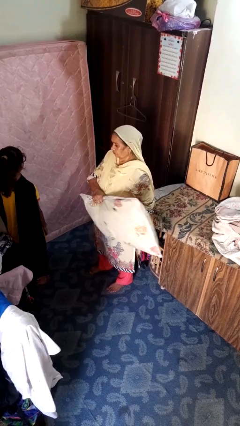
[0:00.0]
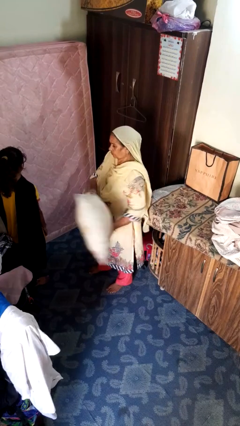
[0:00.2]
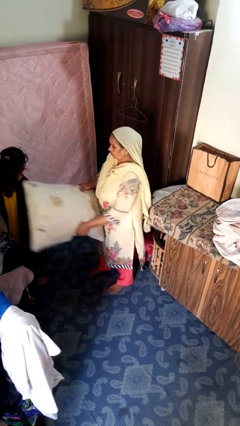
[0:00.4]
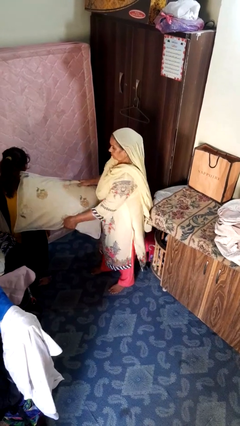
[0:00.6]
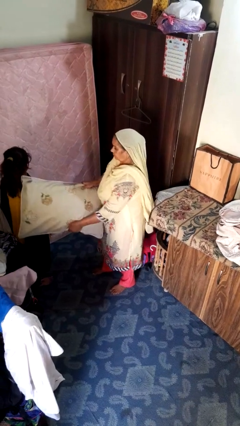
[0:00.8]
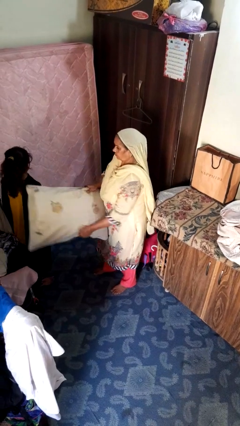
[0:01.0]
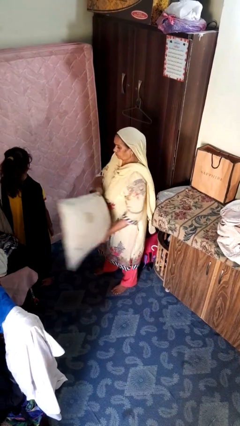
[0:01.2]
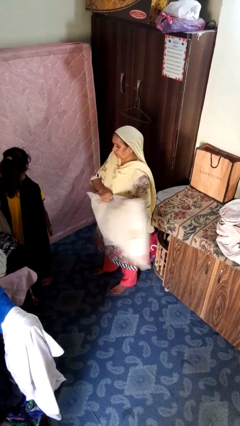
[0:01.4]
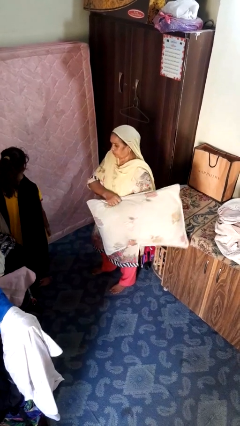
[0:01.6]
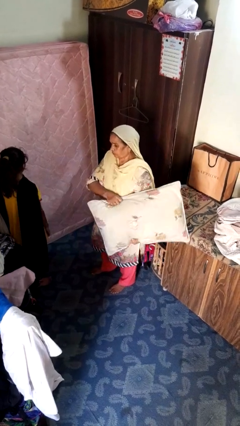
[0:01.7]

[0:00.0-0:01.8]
person hits person with pillow

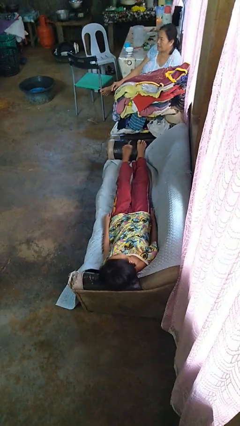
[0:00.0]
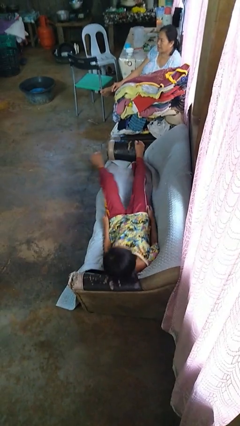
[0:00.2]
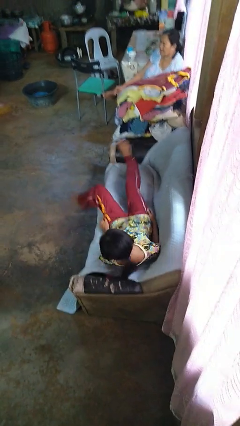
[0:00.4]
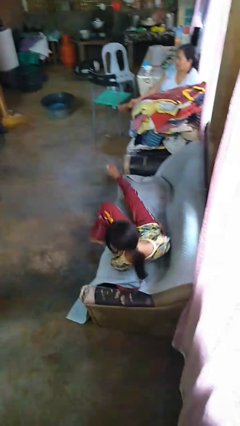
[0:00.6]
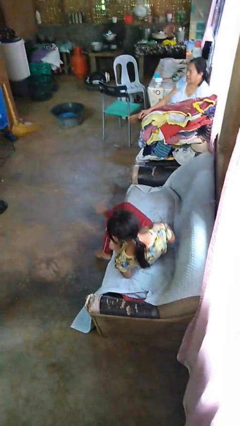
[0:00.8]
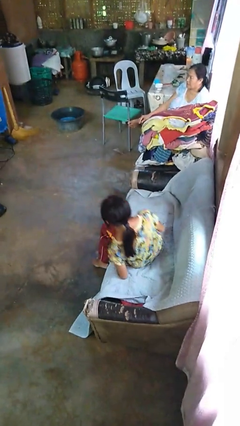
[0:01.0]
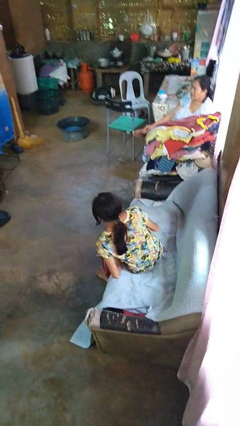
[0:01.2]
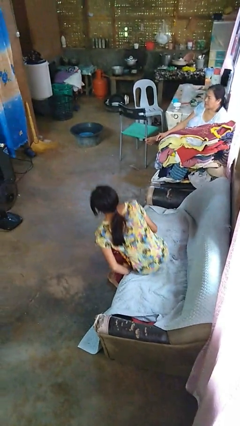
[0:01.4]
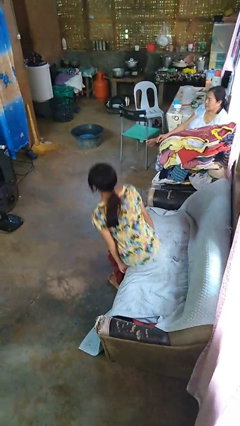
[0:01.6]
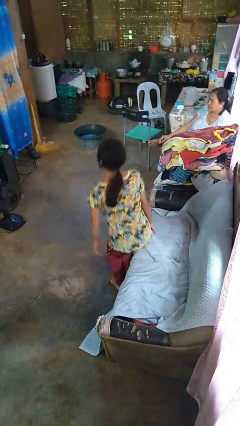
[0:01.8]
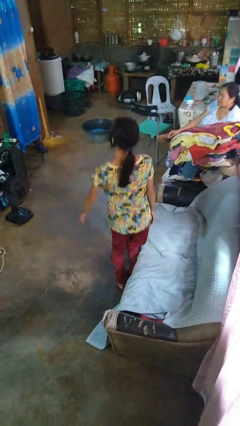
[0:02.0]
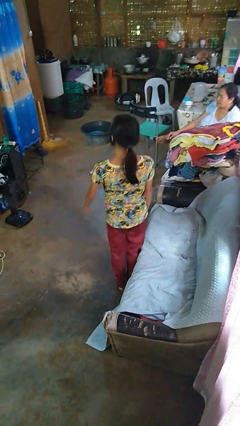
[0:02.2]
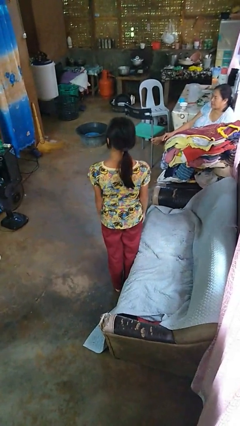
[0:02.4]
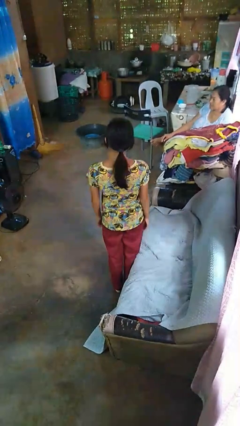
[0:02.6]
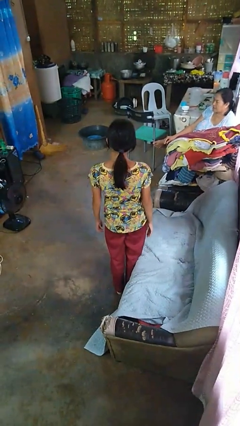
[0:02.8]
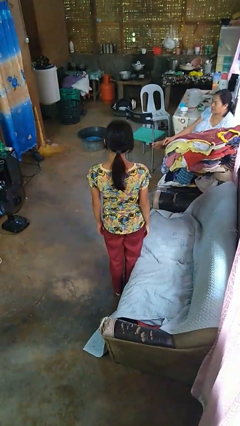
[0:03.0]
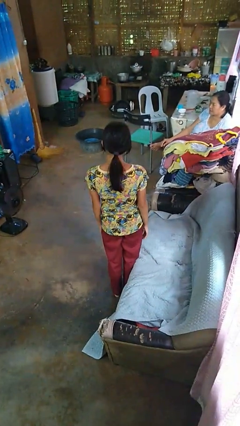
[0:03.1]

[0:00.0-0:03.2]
person stands up

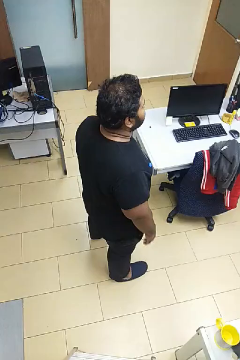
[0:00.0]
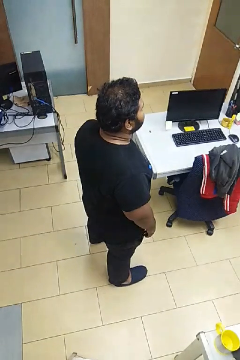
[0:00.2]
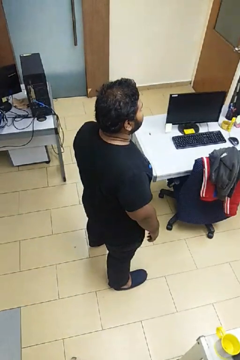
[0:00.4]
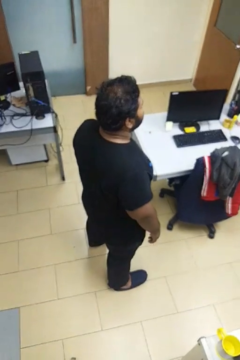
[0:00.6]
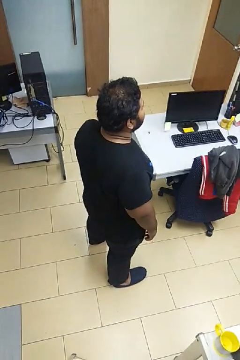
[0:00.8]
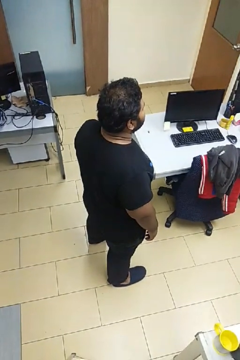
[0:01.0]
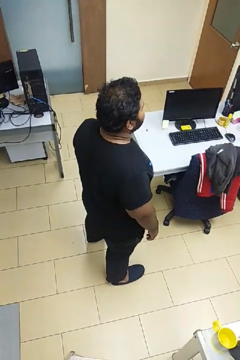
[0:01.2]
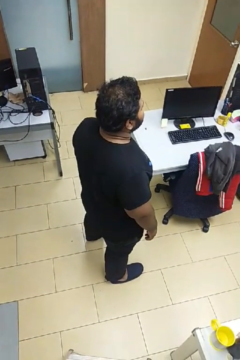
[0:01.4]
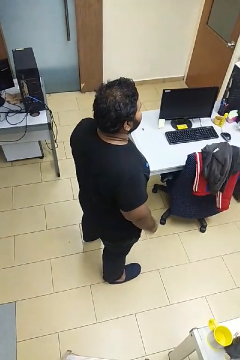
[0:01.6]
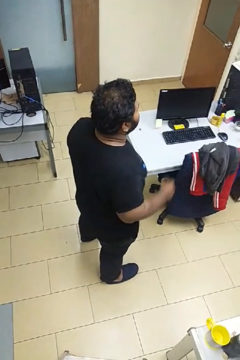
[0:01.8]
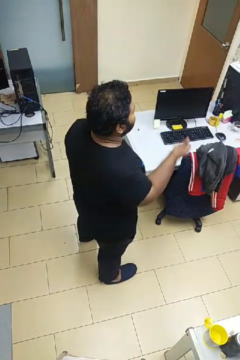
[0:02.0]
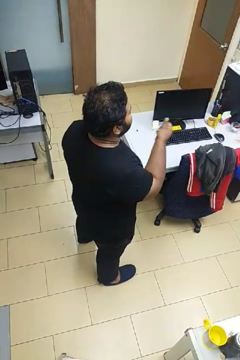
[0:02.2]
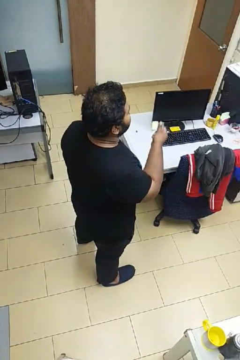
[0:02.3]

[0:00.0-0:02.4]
person snaps fingers

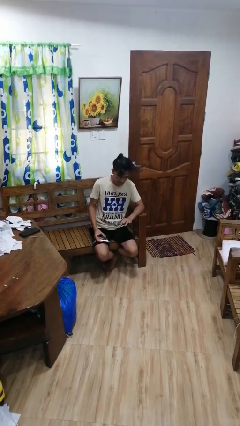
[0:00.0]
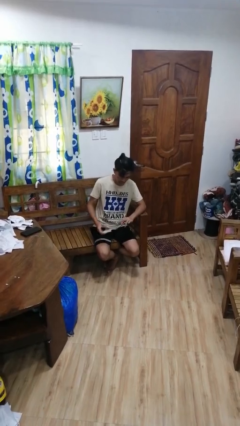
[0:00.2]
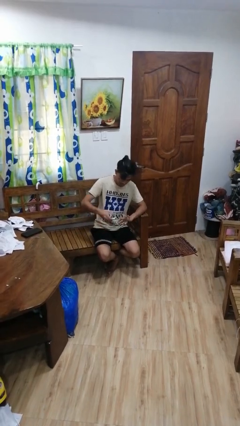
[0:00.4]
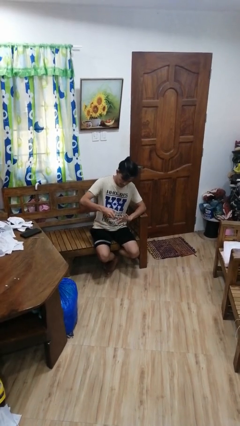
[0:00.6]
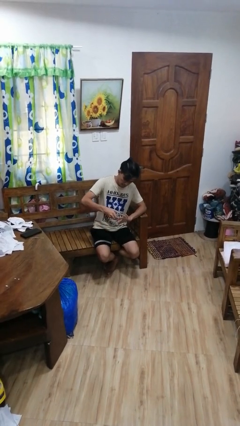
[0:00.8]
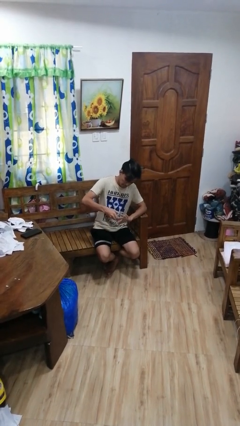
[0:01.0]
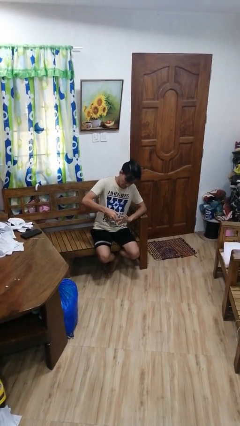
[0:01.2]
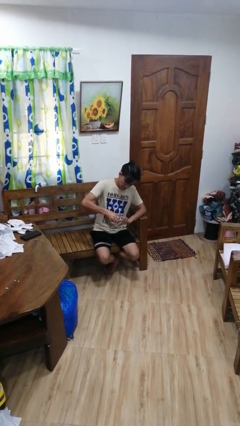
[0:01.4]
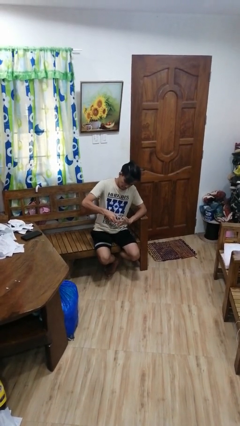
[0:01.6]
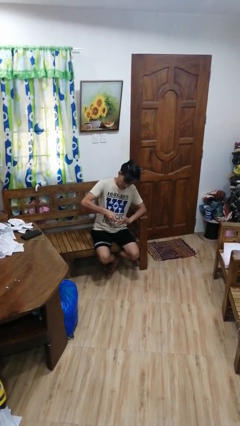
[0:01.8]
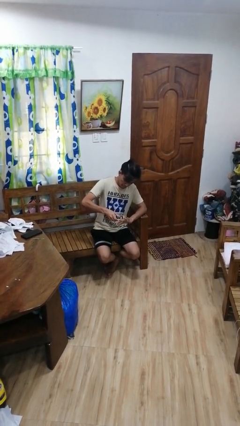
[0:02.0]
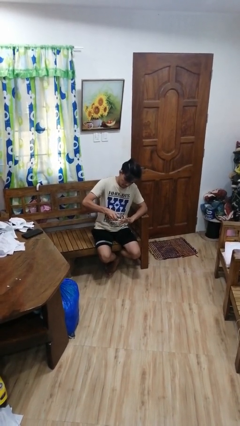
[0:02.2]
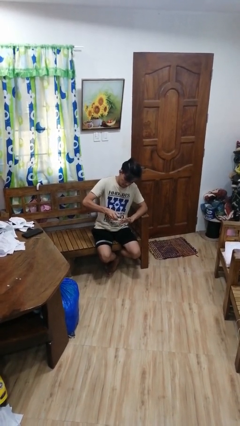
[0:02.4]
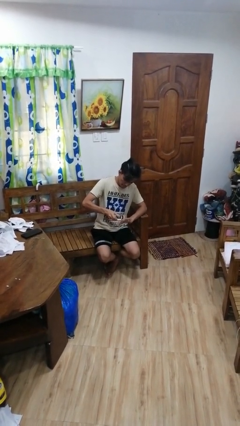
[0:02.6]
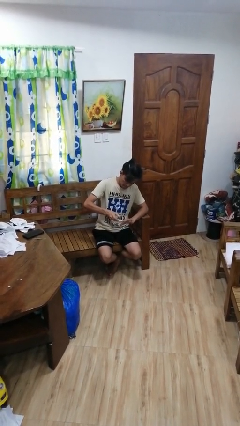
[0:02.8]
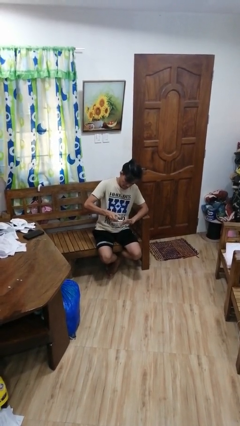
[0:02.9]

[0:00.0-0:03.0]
person clips fingernails

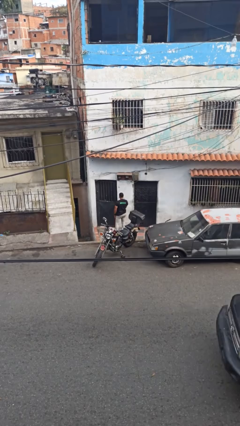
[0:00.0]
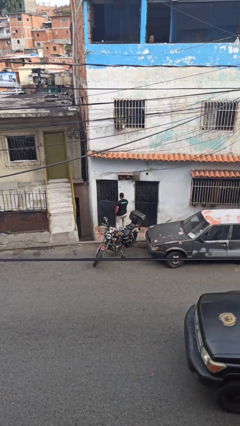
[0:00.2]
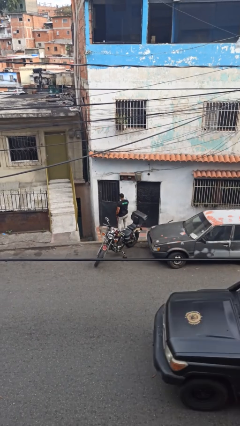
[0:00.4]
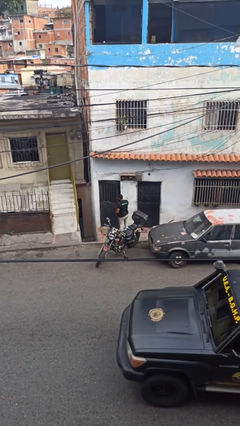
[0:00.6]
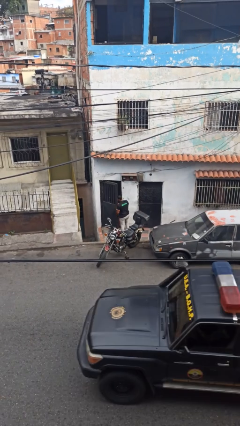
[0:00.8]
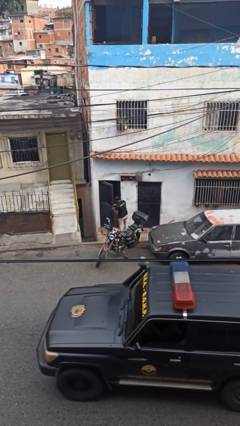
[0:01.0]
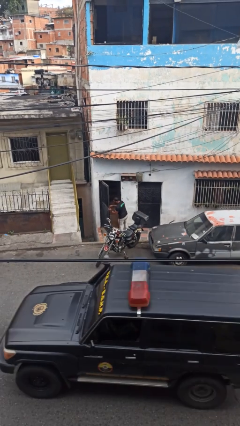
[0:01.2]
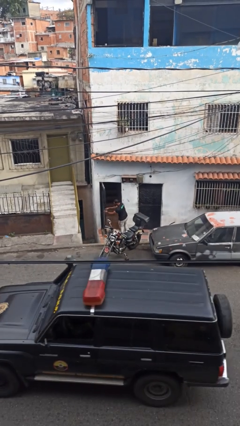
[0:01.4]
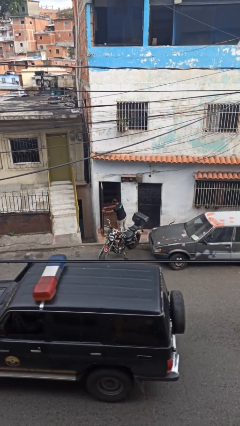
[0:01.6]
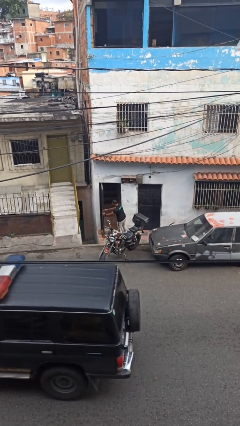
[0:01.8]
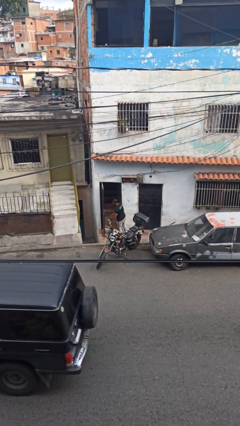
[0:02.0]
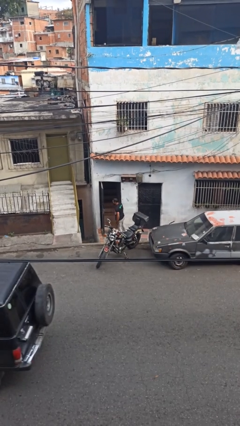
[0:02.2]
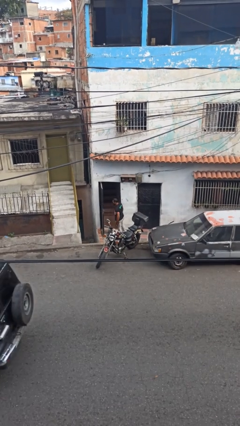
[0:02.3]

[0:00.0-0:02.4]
person opens facility door

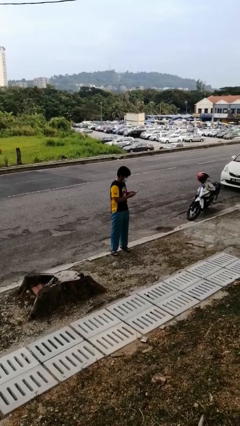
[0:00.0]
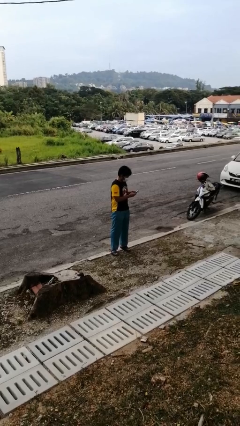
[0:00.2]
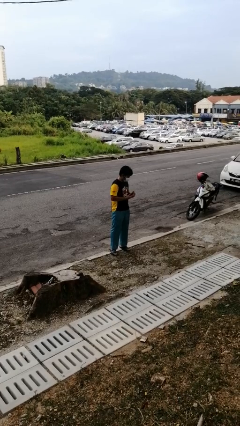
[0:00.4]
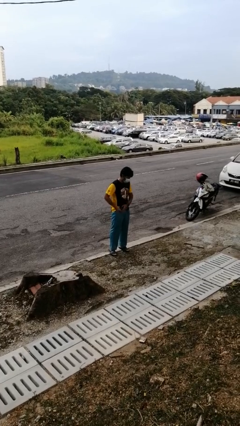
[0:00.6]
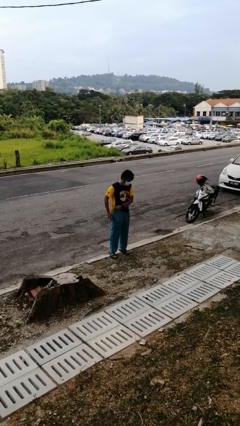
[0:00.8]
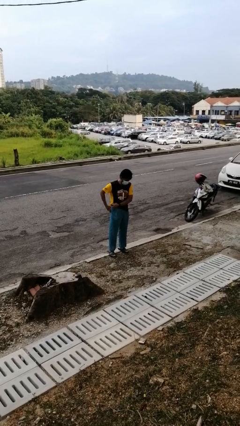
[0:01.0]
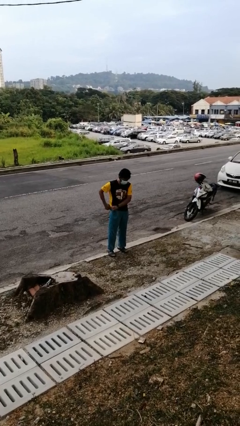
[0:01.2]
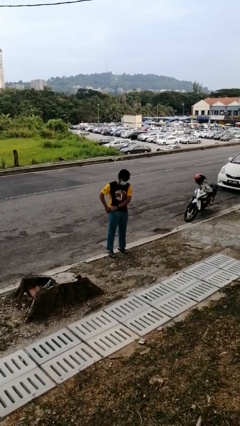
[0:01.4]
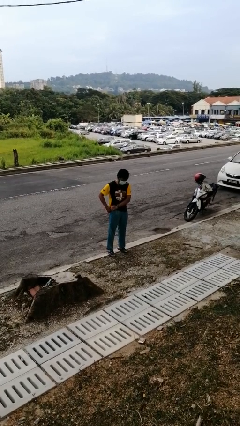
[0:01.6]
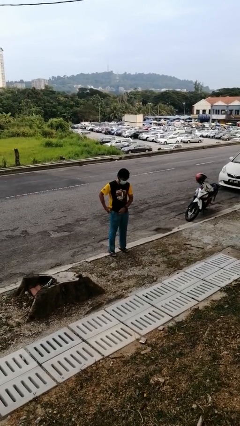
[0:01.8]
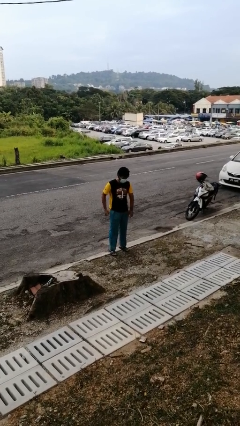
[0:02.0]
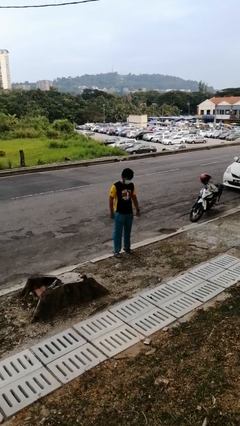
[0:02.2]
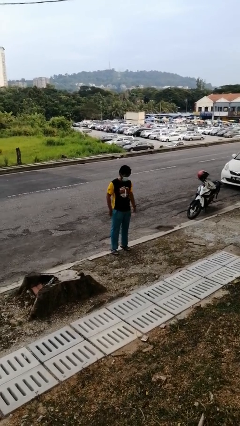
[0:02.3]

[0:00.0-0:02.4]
person puts phone into pocket

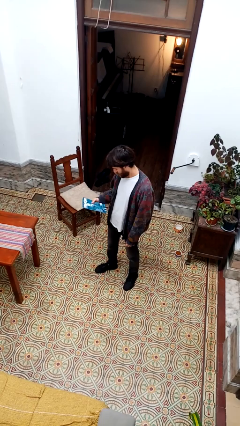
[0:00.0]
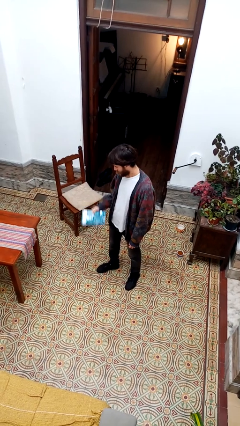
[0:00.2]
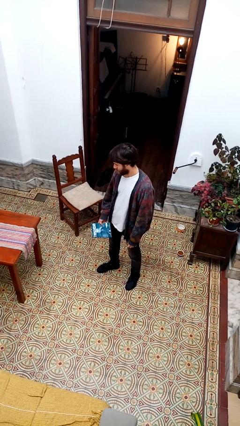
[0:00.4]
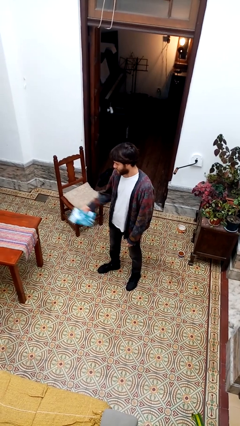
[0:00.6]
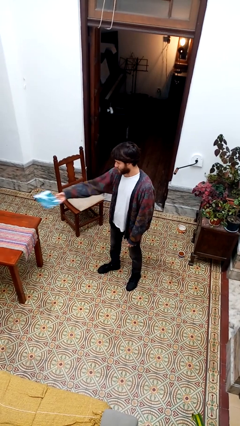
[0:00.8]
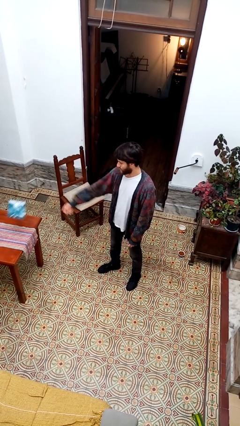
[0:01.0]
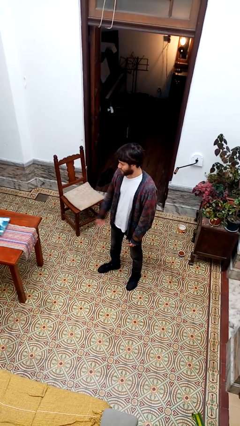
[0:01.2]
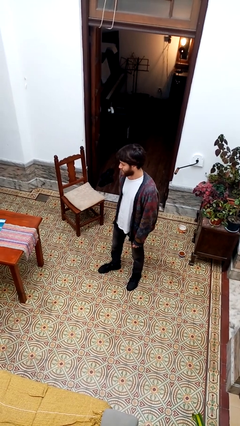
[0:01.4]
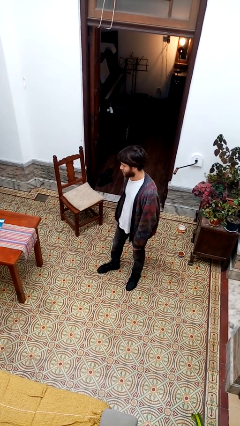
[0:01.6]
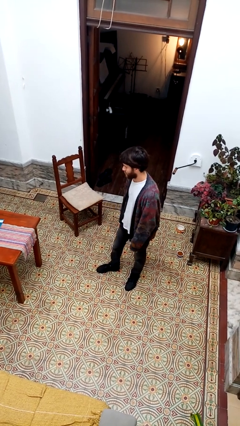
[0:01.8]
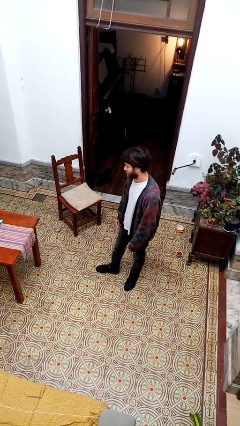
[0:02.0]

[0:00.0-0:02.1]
person throws object on table

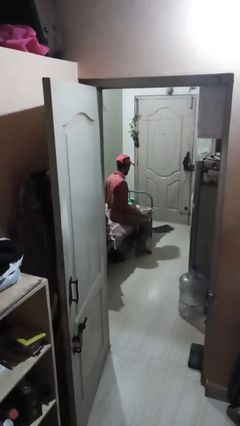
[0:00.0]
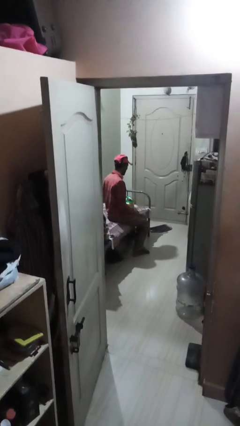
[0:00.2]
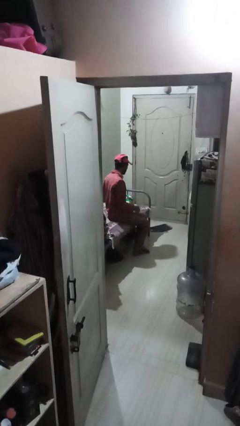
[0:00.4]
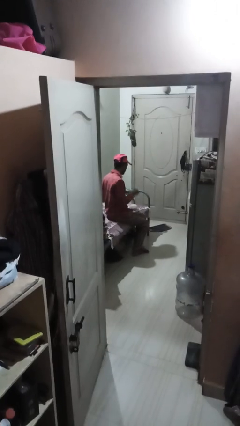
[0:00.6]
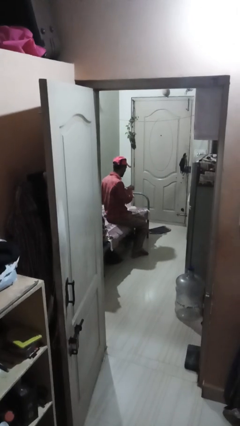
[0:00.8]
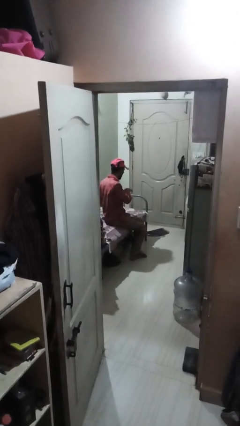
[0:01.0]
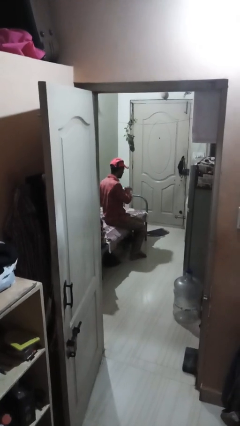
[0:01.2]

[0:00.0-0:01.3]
person eats snack from bag
